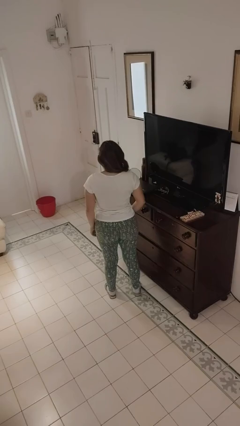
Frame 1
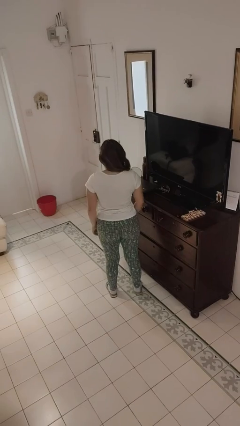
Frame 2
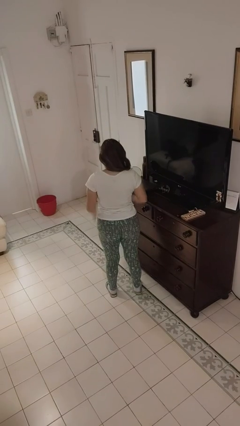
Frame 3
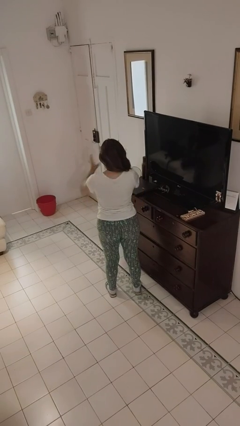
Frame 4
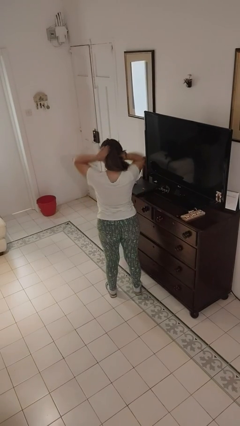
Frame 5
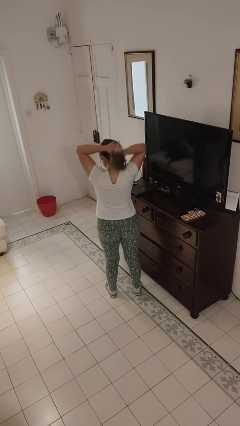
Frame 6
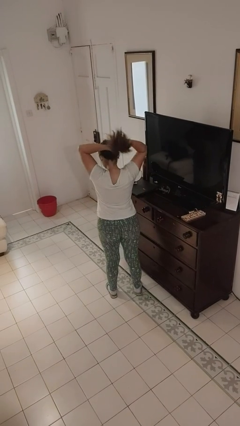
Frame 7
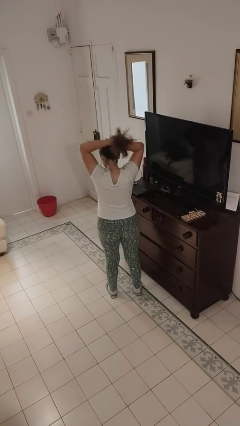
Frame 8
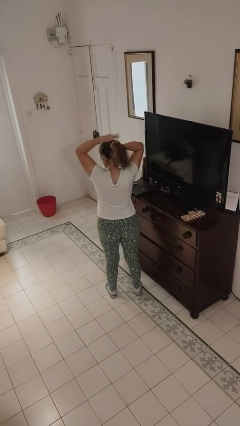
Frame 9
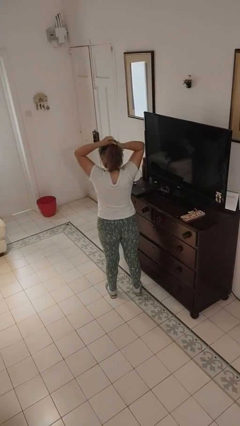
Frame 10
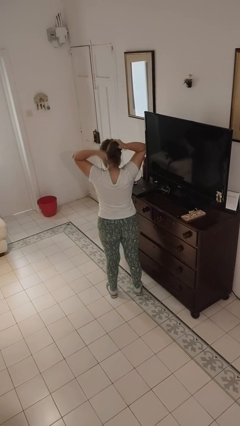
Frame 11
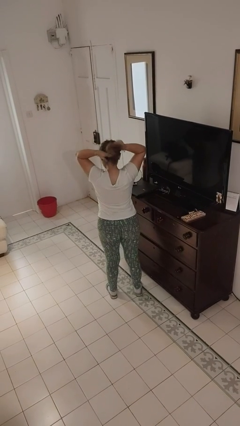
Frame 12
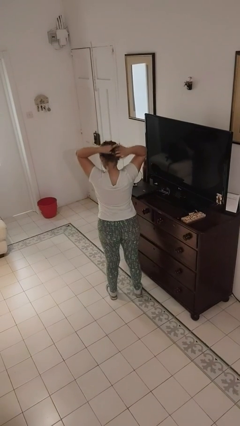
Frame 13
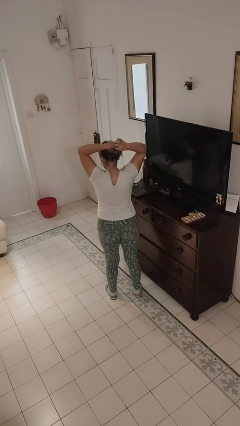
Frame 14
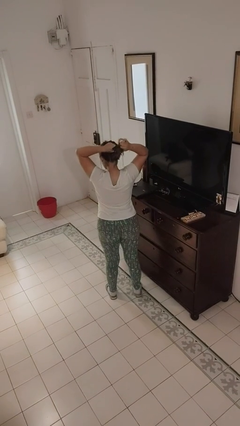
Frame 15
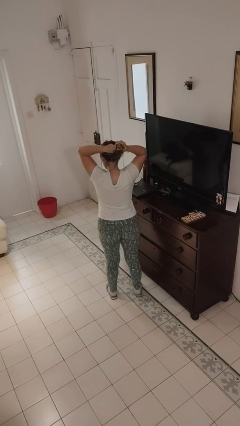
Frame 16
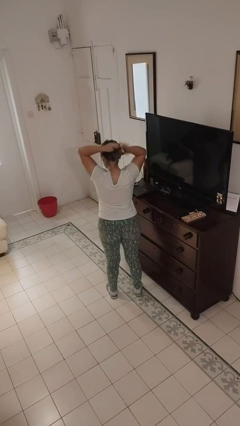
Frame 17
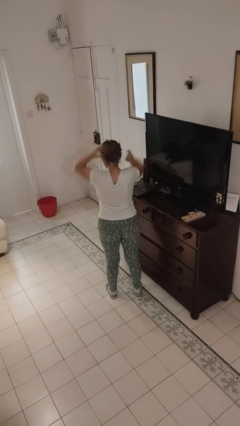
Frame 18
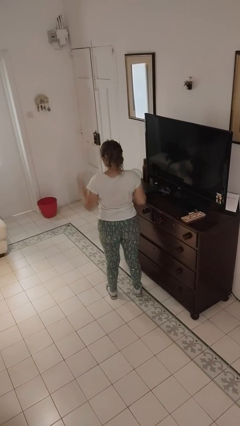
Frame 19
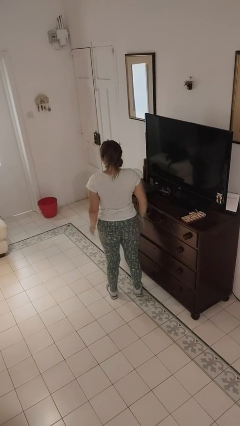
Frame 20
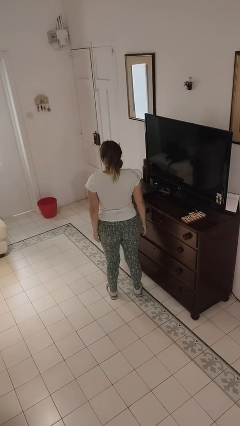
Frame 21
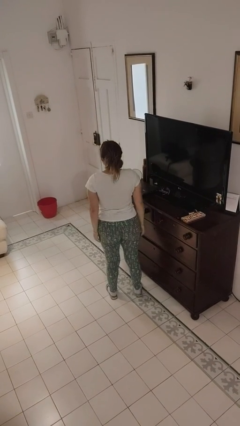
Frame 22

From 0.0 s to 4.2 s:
person puts hair in ponytail

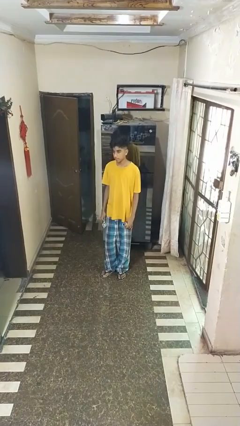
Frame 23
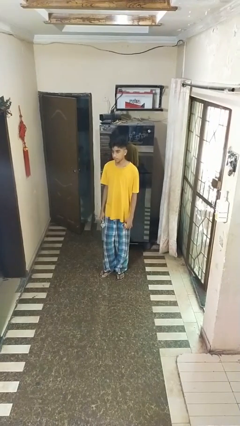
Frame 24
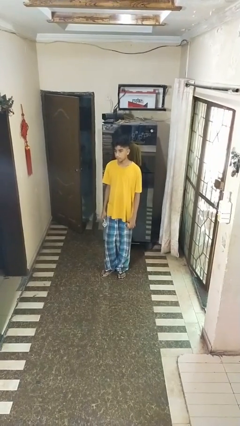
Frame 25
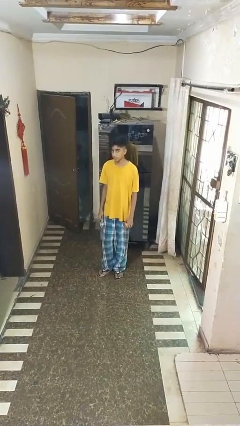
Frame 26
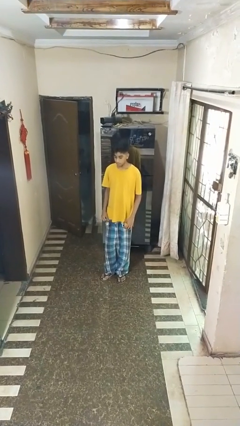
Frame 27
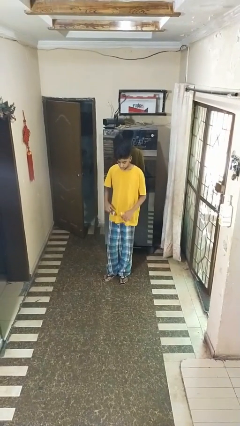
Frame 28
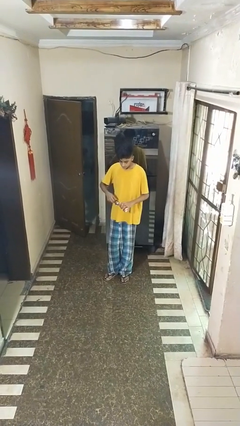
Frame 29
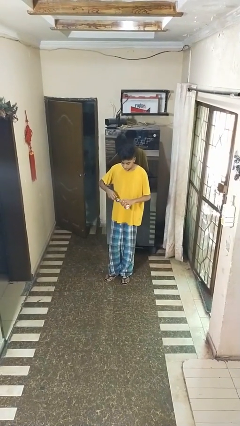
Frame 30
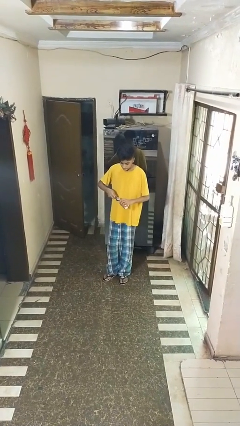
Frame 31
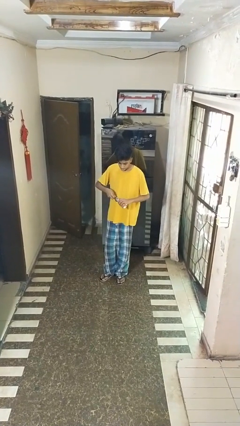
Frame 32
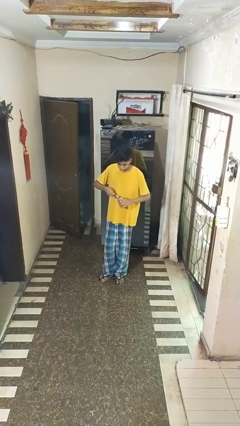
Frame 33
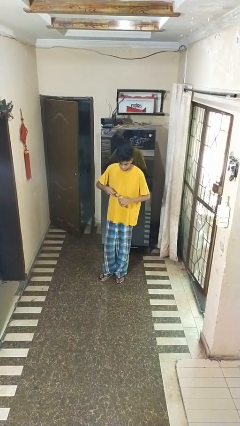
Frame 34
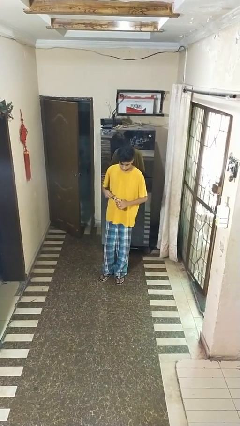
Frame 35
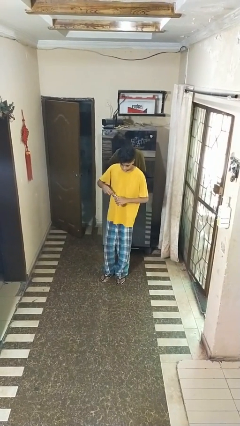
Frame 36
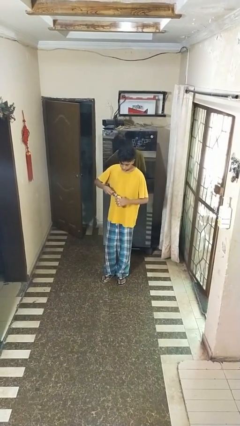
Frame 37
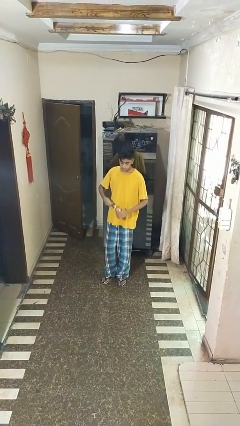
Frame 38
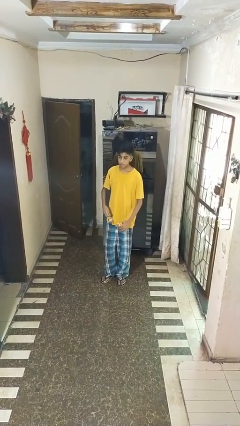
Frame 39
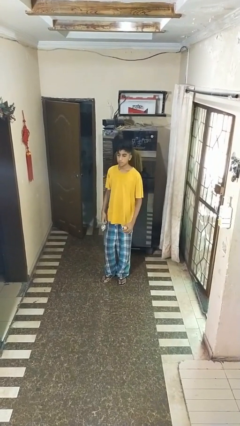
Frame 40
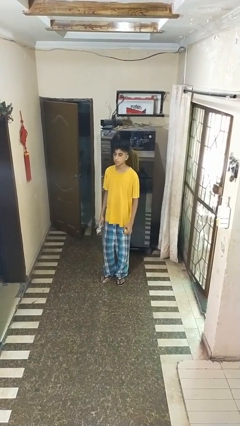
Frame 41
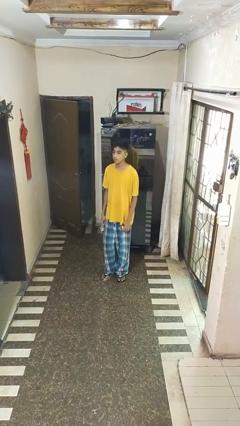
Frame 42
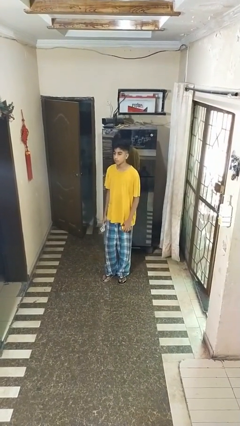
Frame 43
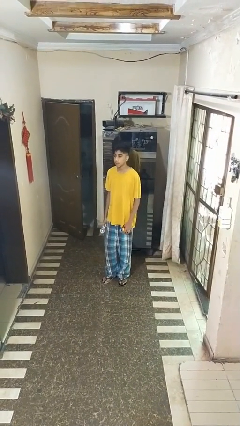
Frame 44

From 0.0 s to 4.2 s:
person opens can with can opener

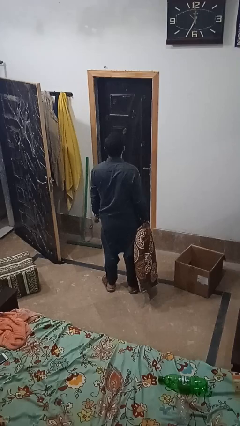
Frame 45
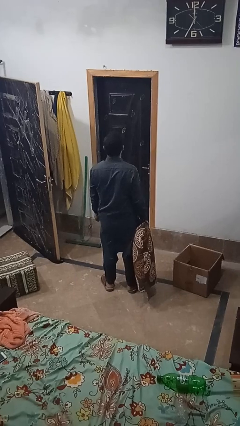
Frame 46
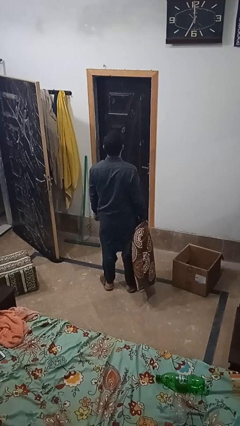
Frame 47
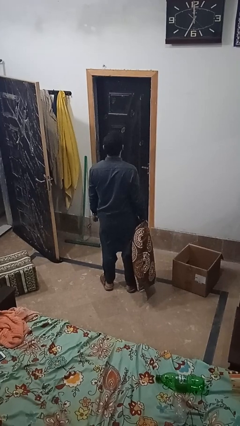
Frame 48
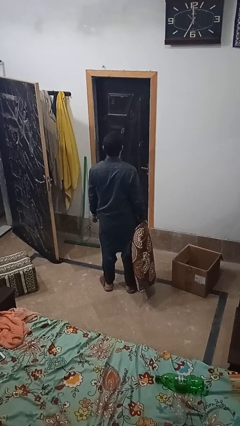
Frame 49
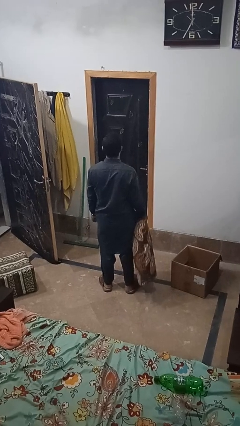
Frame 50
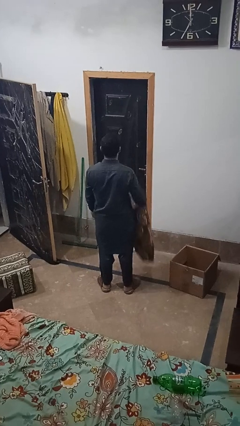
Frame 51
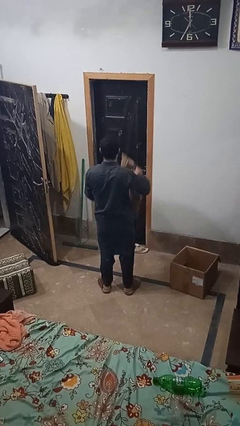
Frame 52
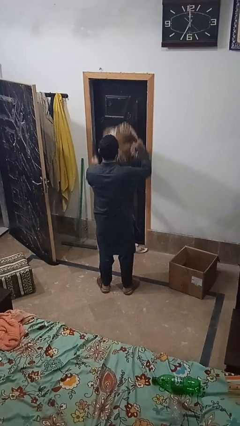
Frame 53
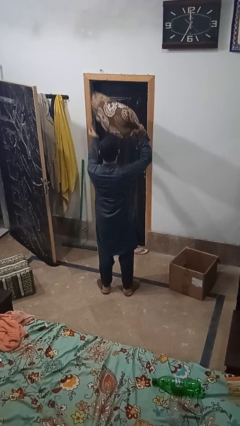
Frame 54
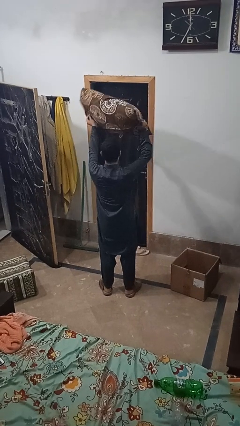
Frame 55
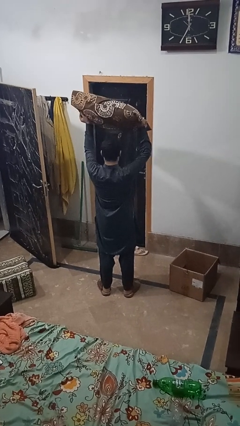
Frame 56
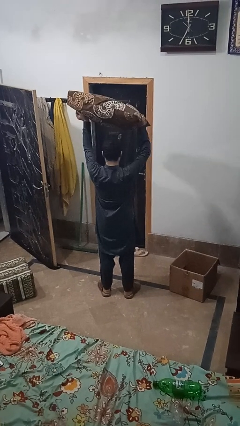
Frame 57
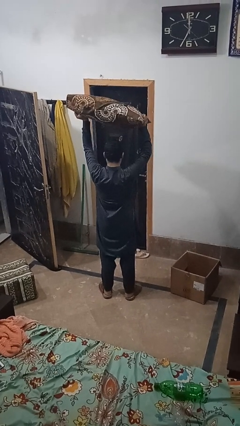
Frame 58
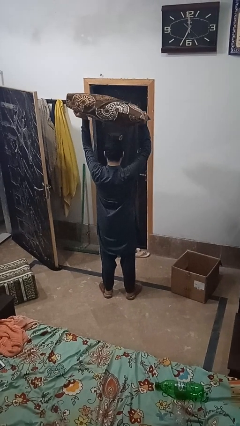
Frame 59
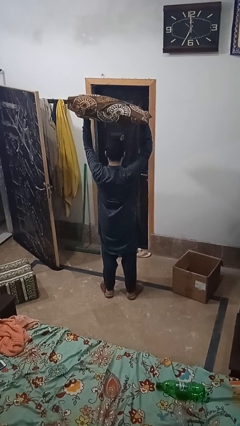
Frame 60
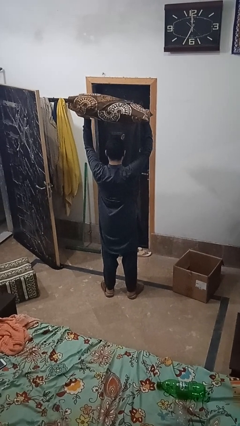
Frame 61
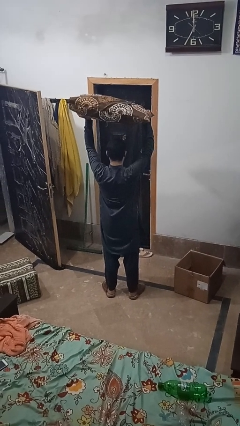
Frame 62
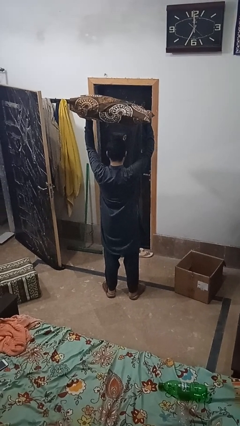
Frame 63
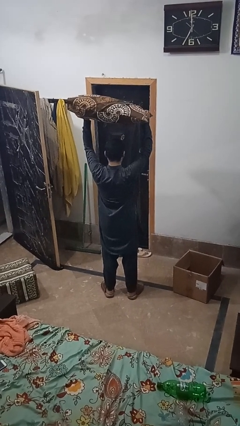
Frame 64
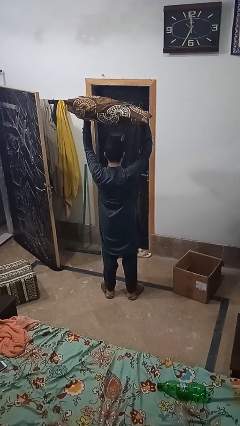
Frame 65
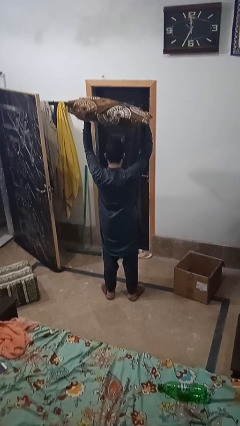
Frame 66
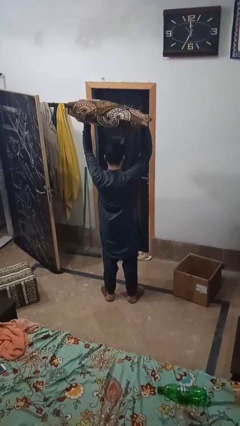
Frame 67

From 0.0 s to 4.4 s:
person holds object above head

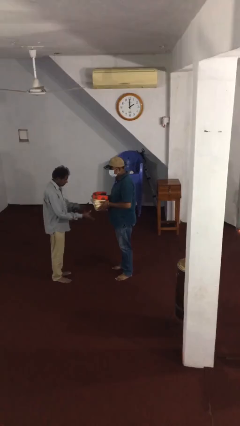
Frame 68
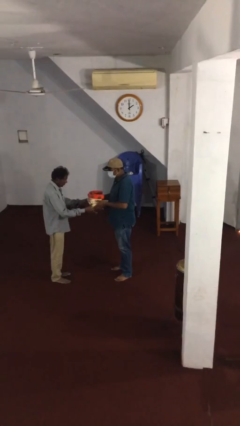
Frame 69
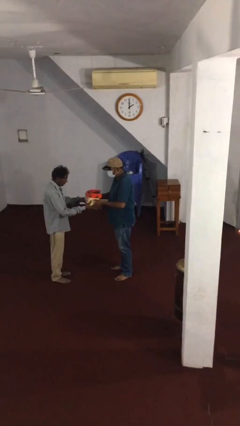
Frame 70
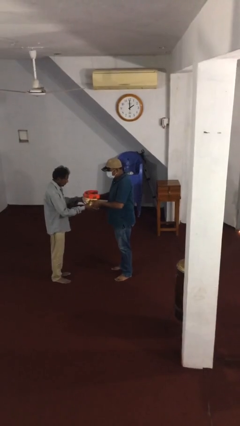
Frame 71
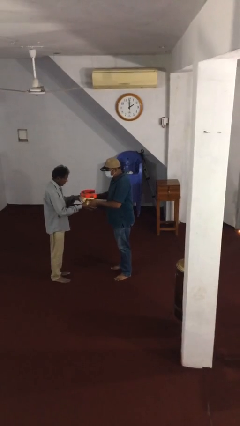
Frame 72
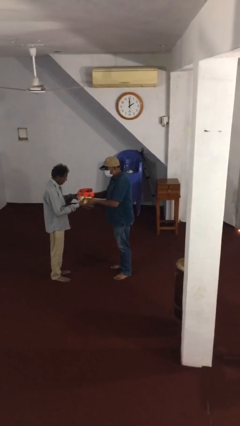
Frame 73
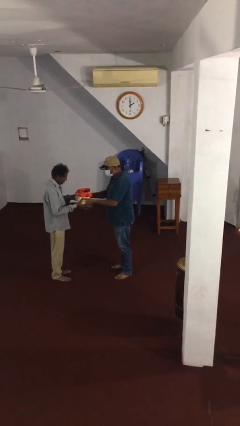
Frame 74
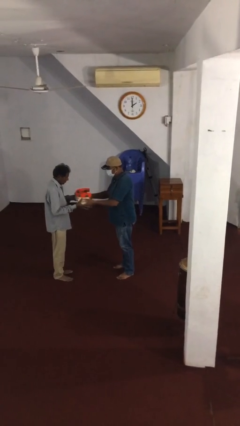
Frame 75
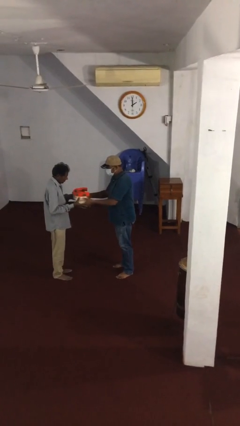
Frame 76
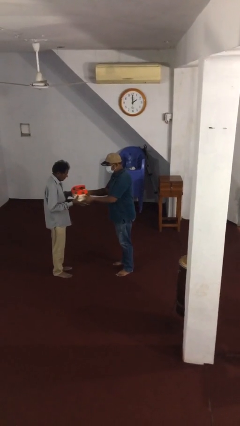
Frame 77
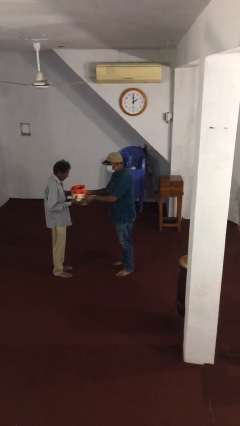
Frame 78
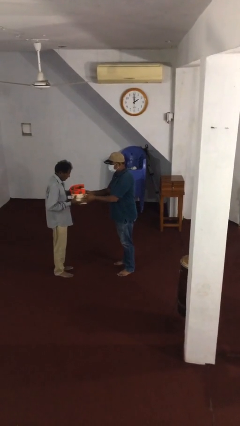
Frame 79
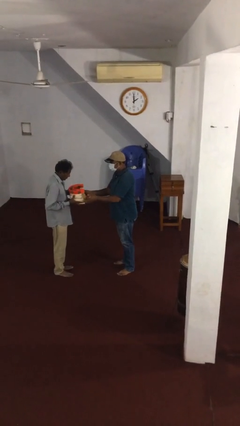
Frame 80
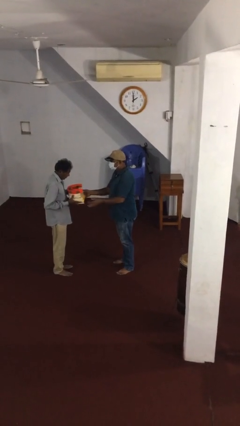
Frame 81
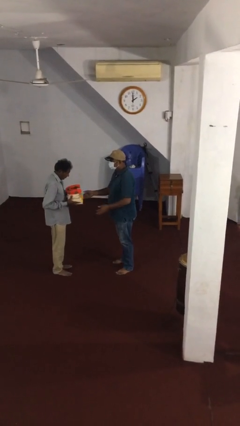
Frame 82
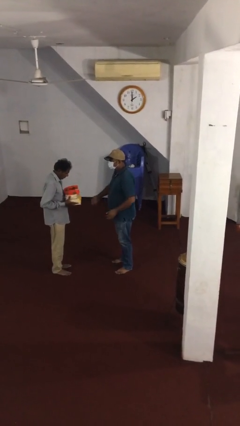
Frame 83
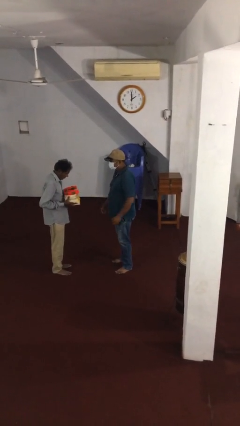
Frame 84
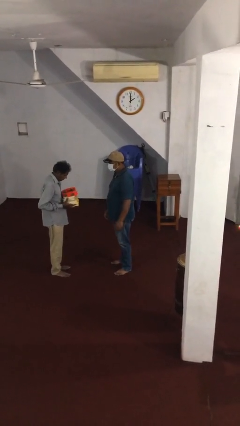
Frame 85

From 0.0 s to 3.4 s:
person transfers object to person

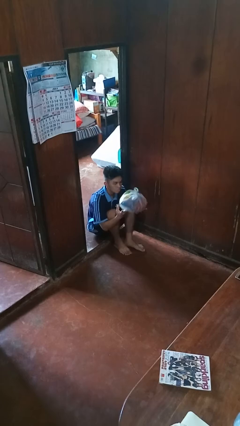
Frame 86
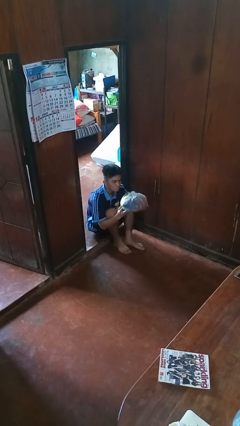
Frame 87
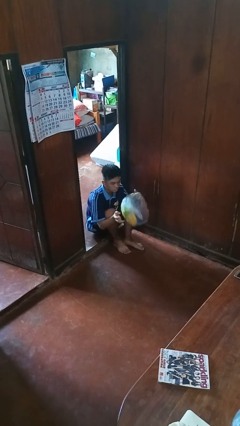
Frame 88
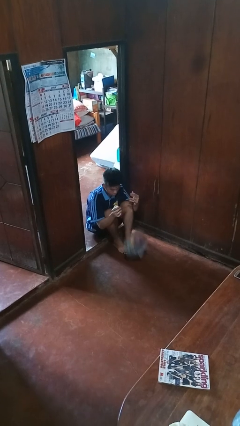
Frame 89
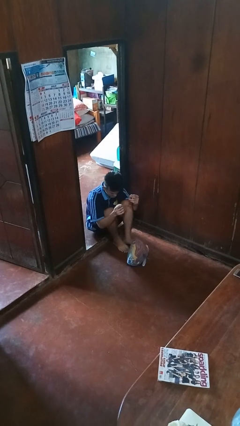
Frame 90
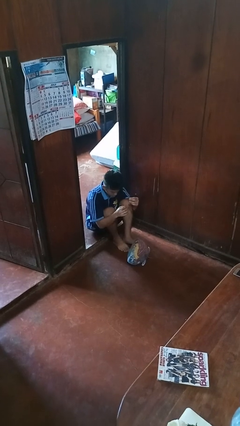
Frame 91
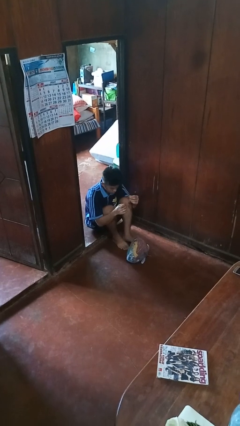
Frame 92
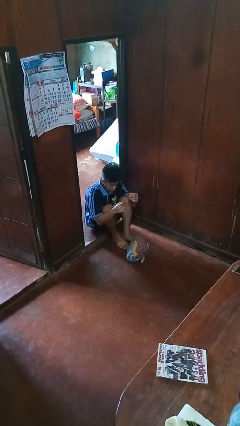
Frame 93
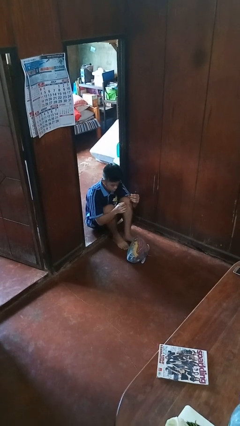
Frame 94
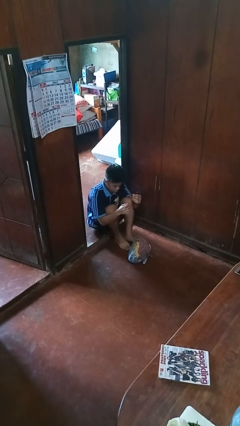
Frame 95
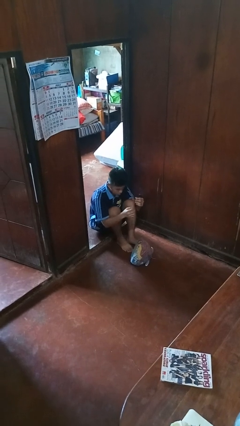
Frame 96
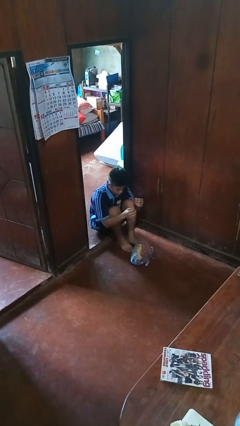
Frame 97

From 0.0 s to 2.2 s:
person drops object
